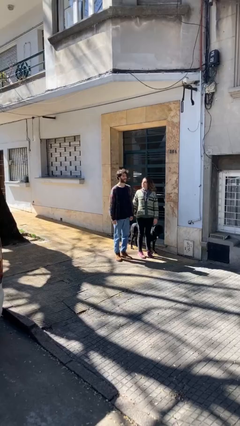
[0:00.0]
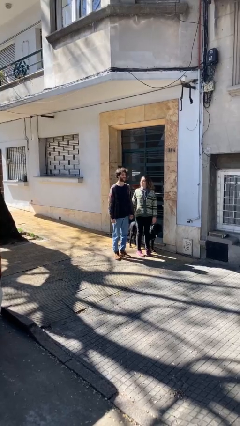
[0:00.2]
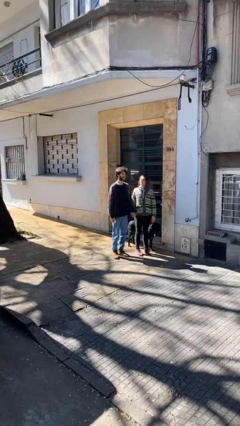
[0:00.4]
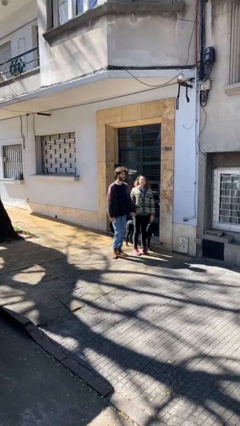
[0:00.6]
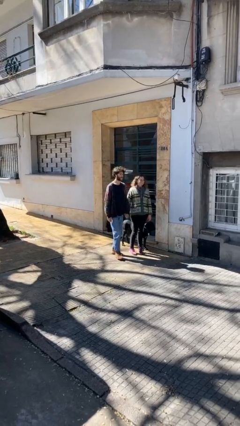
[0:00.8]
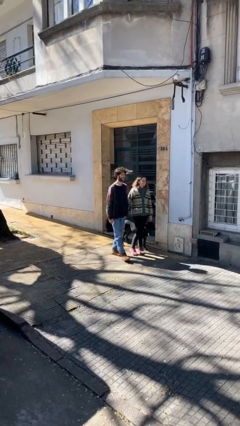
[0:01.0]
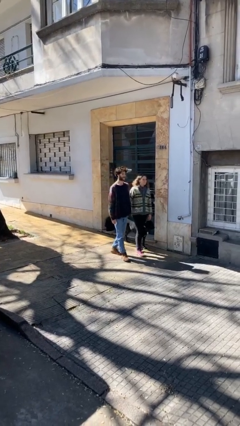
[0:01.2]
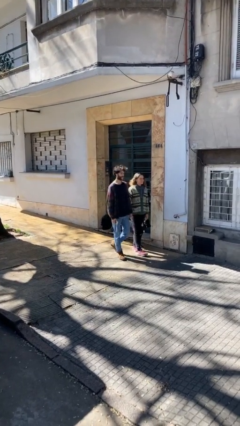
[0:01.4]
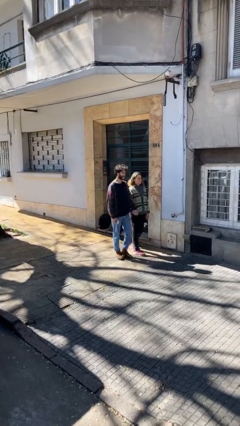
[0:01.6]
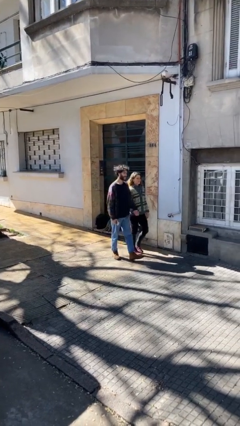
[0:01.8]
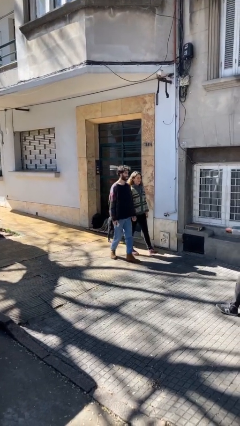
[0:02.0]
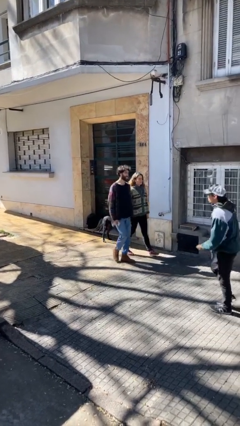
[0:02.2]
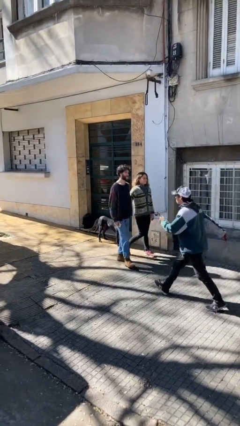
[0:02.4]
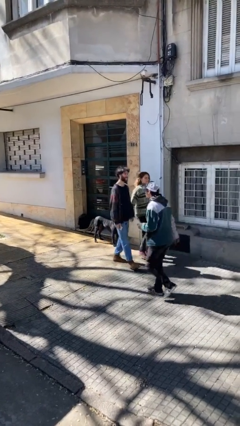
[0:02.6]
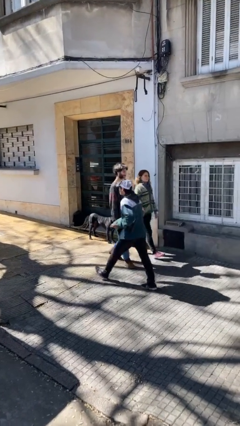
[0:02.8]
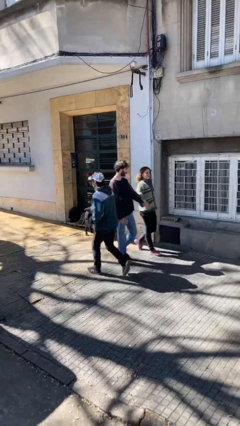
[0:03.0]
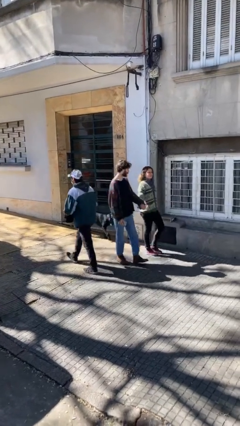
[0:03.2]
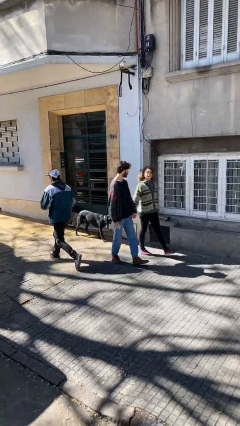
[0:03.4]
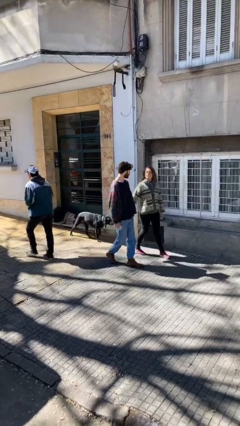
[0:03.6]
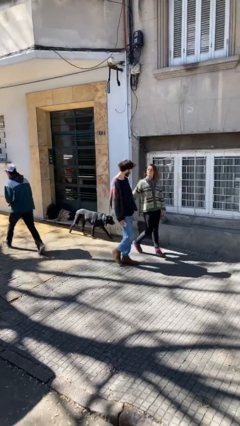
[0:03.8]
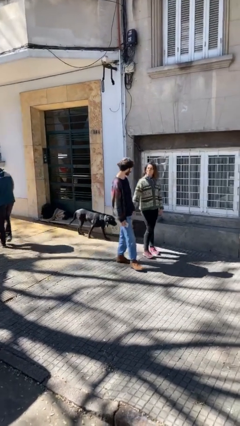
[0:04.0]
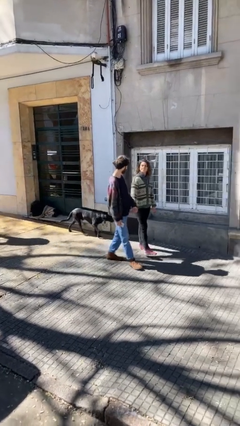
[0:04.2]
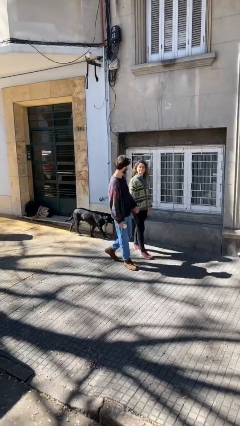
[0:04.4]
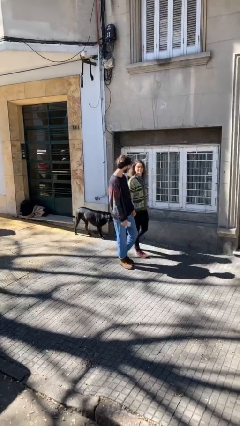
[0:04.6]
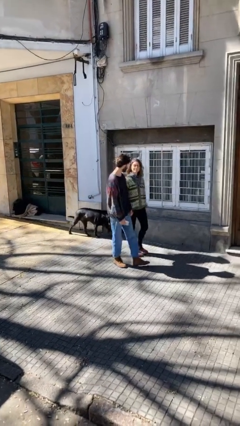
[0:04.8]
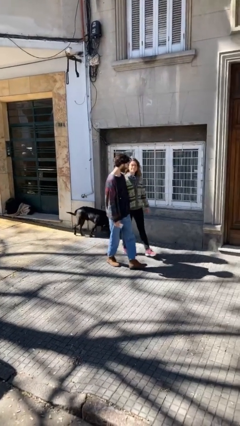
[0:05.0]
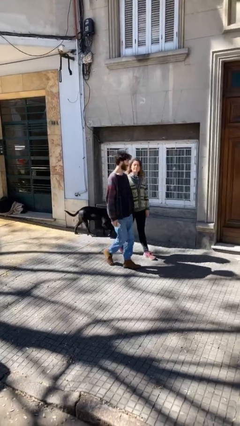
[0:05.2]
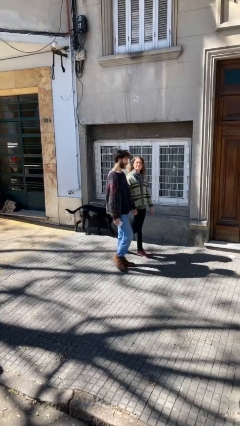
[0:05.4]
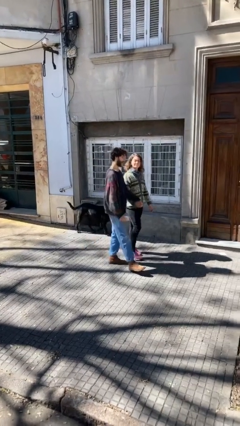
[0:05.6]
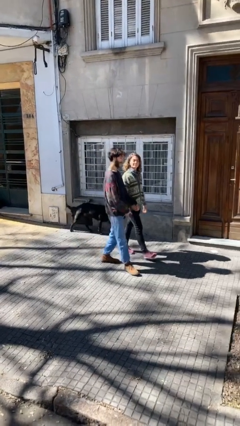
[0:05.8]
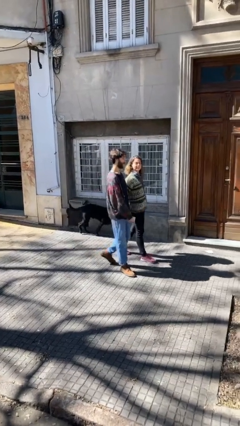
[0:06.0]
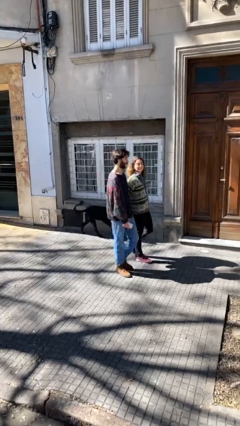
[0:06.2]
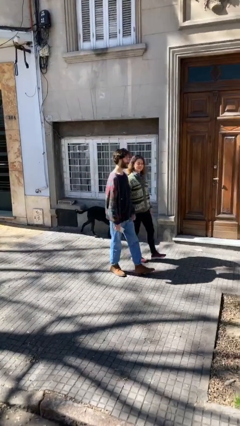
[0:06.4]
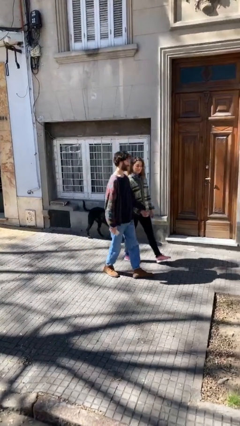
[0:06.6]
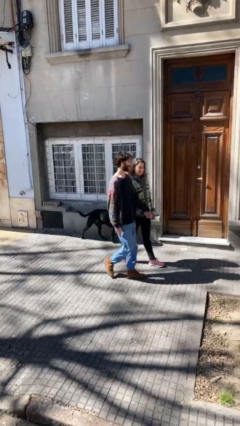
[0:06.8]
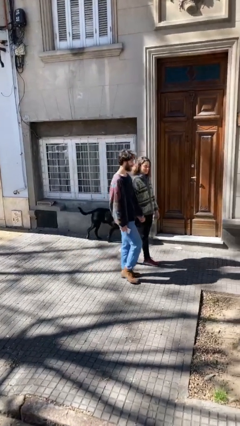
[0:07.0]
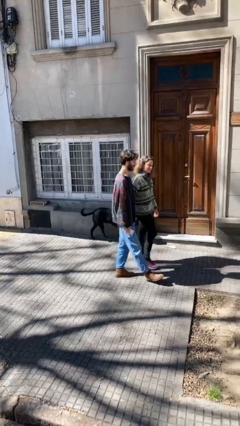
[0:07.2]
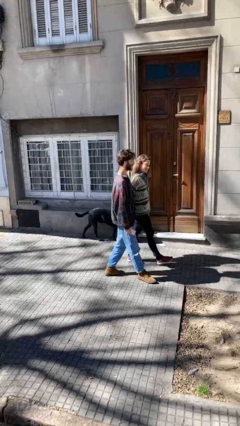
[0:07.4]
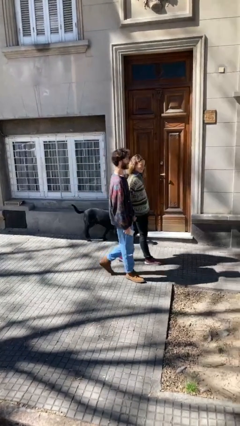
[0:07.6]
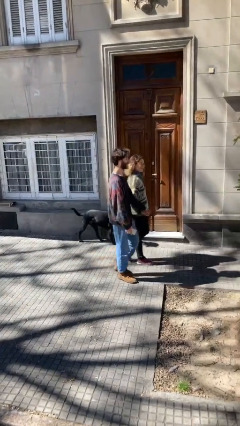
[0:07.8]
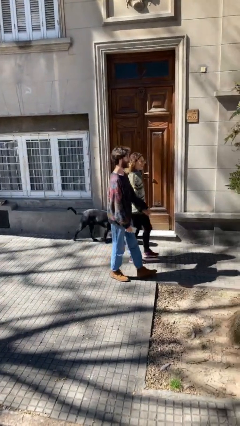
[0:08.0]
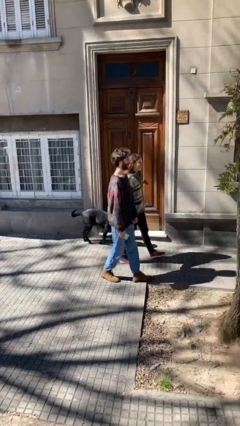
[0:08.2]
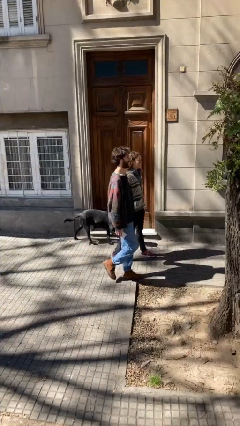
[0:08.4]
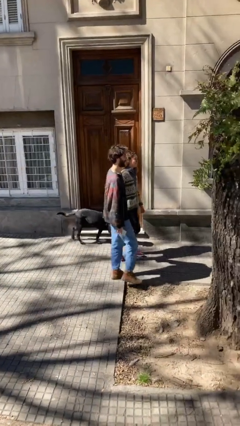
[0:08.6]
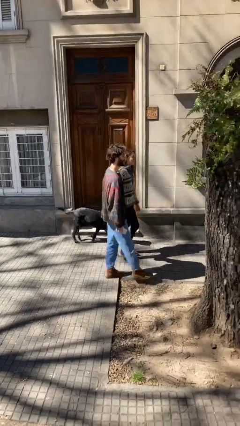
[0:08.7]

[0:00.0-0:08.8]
person holds hand

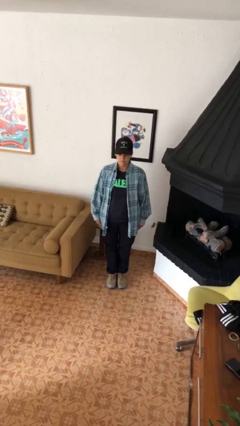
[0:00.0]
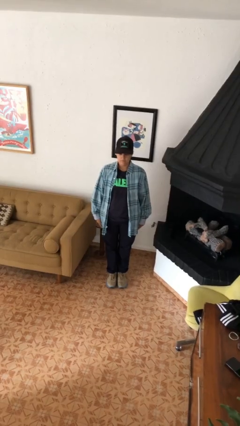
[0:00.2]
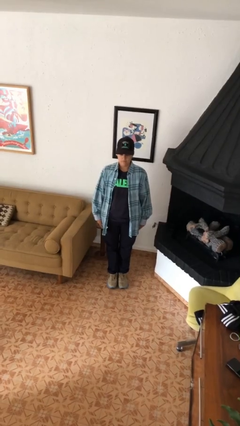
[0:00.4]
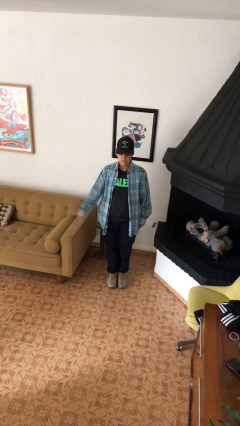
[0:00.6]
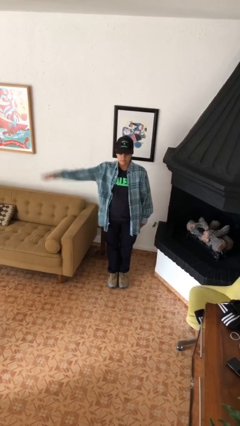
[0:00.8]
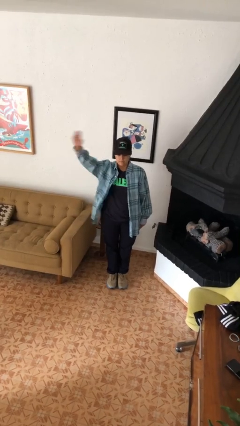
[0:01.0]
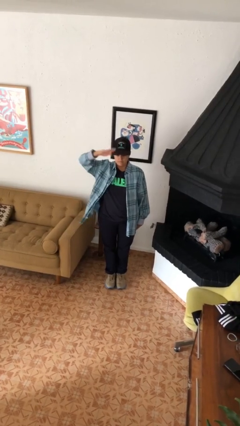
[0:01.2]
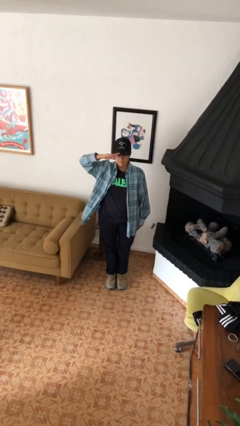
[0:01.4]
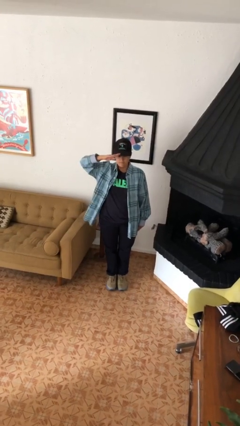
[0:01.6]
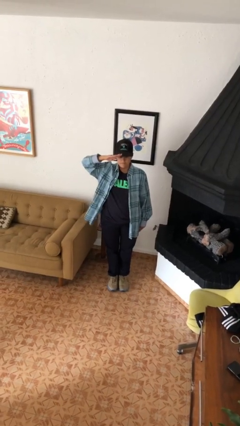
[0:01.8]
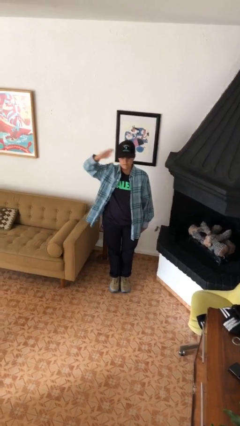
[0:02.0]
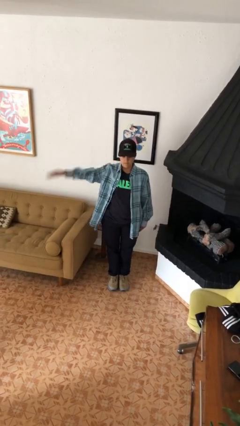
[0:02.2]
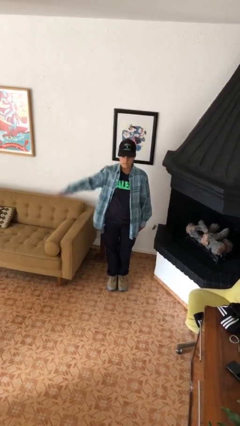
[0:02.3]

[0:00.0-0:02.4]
person salutes

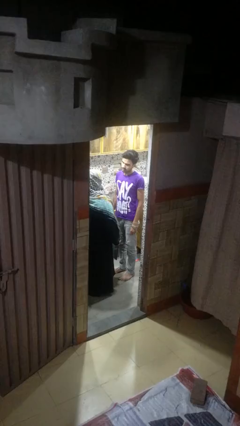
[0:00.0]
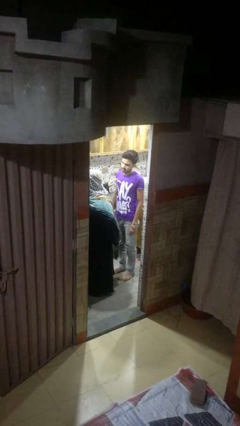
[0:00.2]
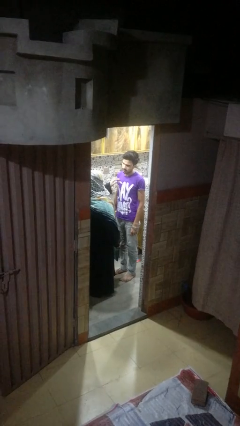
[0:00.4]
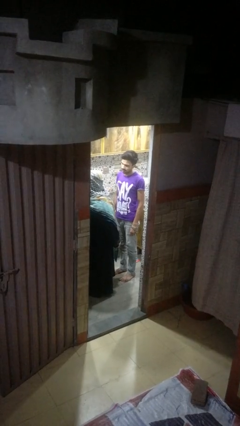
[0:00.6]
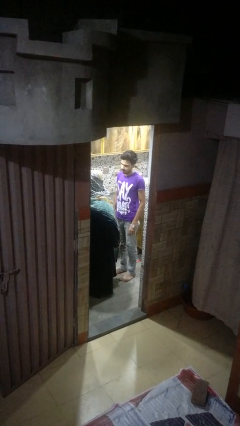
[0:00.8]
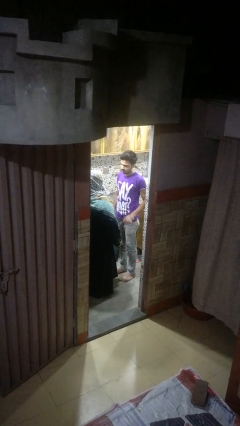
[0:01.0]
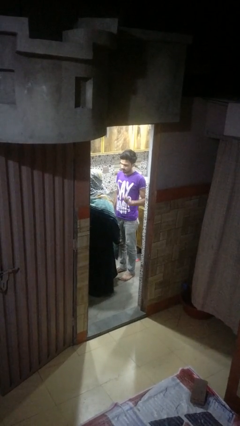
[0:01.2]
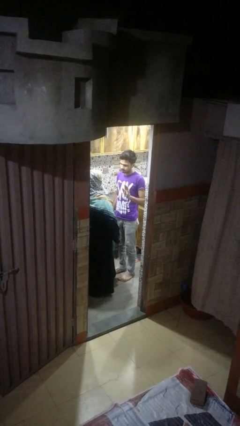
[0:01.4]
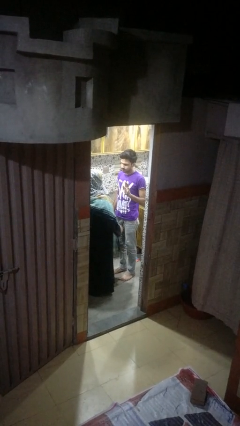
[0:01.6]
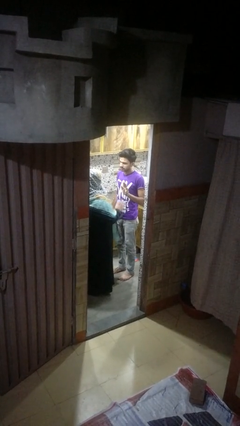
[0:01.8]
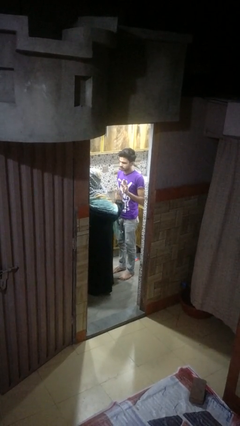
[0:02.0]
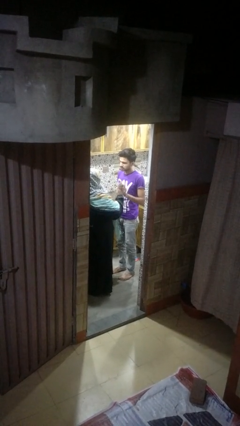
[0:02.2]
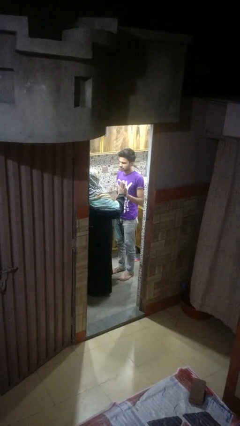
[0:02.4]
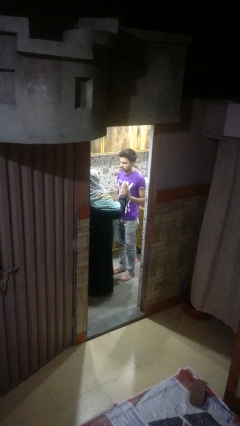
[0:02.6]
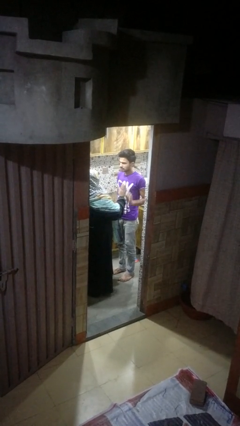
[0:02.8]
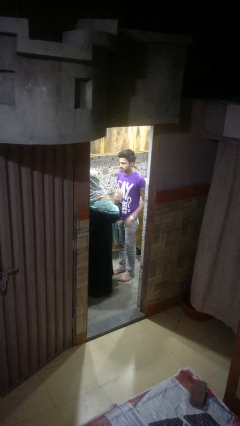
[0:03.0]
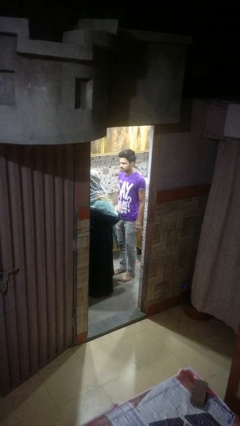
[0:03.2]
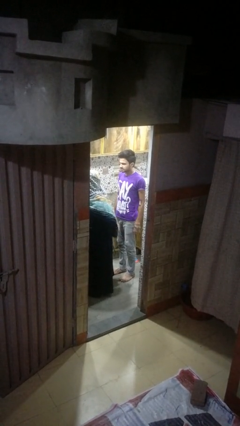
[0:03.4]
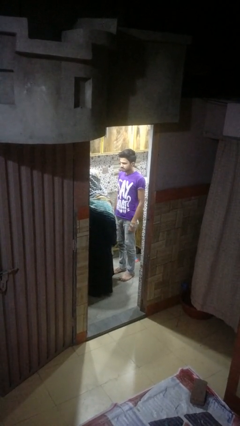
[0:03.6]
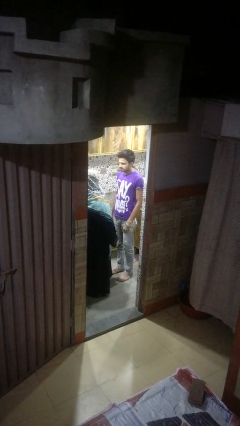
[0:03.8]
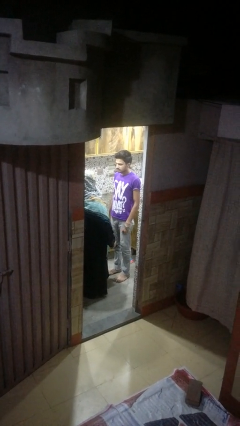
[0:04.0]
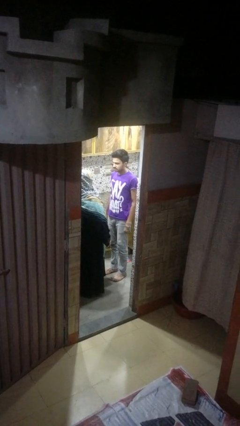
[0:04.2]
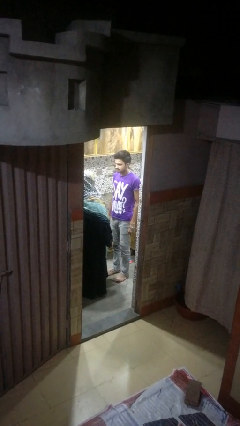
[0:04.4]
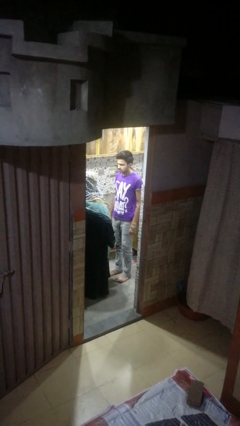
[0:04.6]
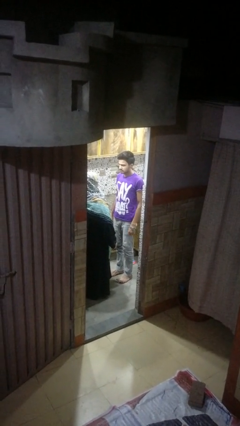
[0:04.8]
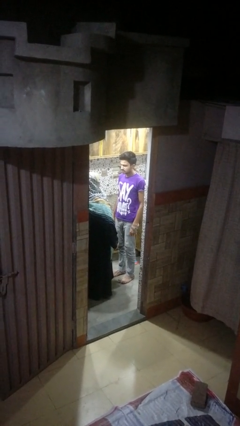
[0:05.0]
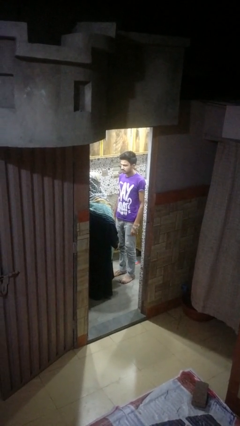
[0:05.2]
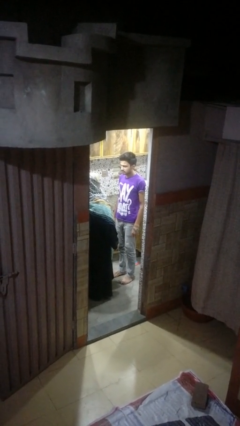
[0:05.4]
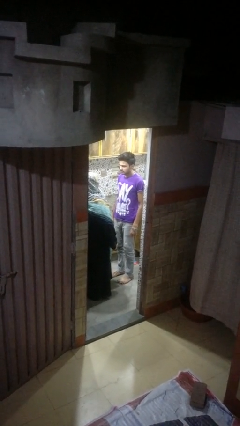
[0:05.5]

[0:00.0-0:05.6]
person highfives hand

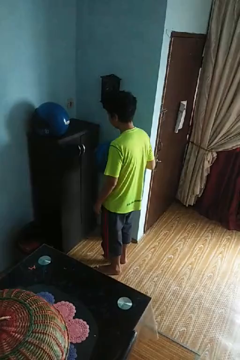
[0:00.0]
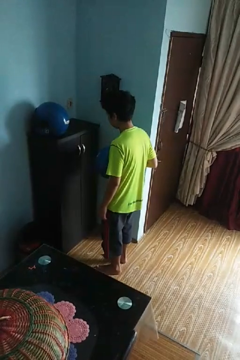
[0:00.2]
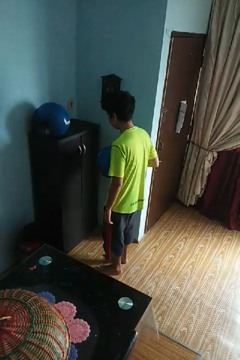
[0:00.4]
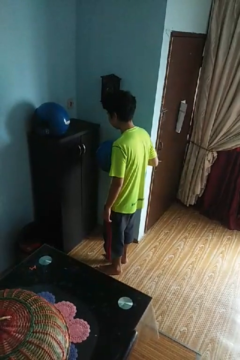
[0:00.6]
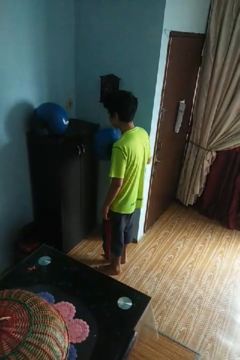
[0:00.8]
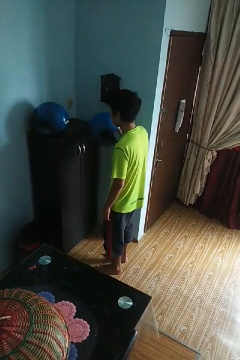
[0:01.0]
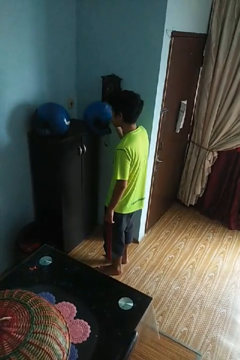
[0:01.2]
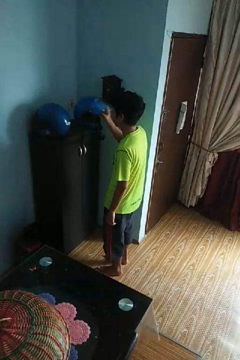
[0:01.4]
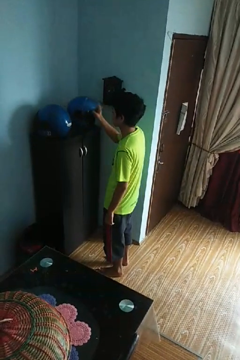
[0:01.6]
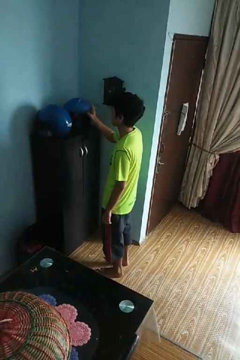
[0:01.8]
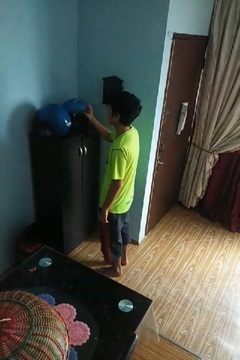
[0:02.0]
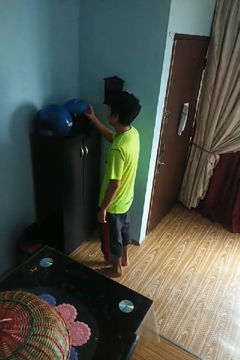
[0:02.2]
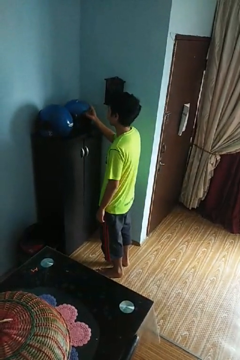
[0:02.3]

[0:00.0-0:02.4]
person puts down object on countertop
